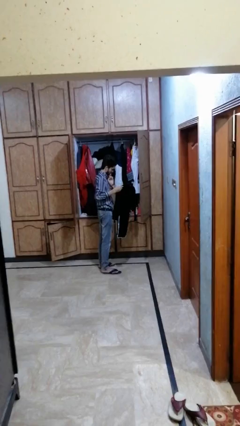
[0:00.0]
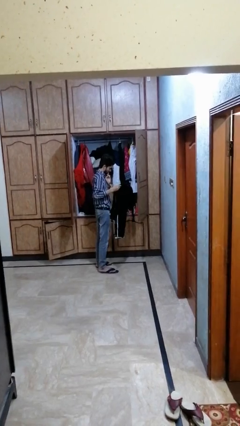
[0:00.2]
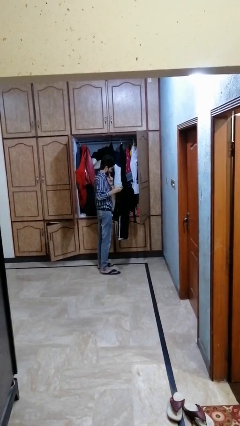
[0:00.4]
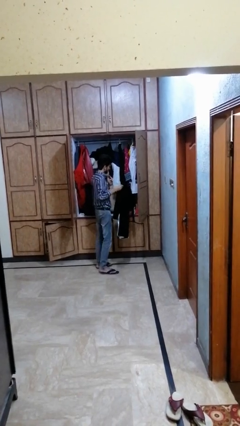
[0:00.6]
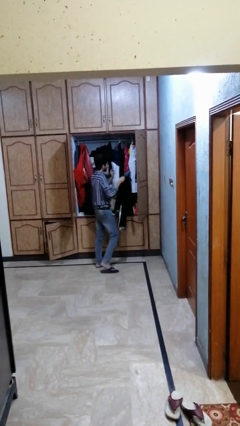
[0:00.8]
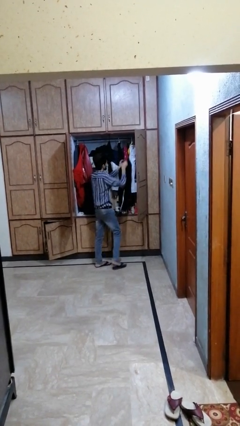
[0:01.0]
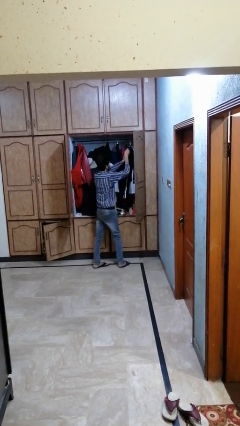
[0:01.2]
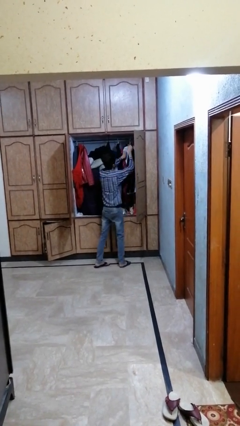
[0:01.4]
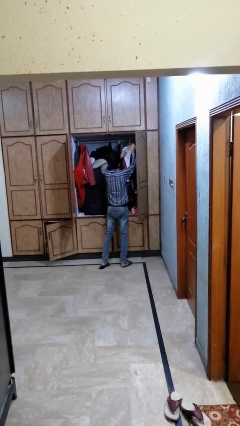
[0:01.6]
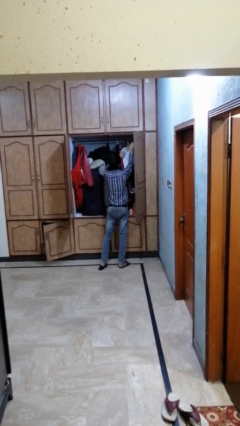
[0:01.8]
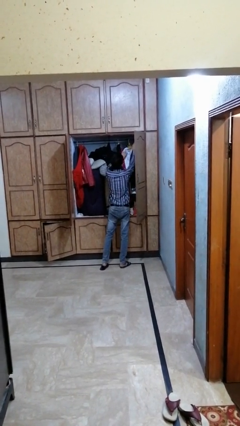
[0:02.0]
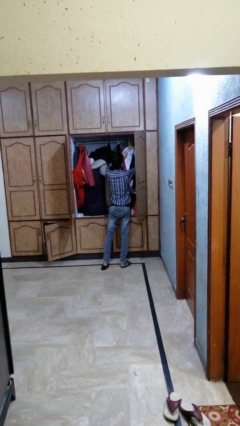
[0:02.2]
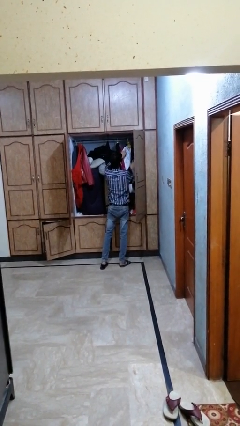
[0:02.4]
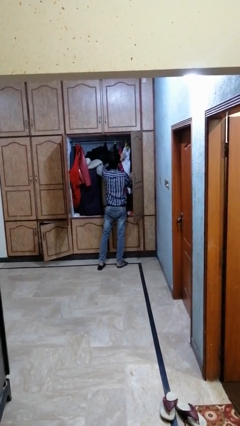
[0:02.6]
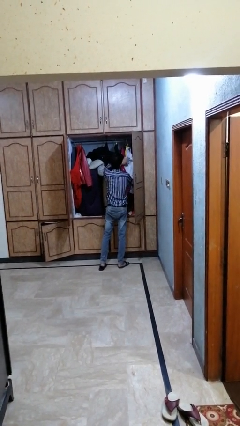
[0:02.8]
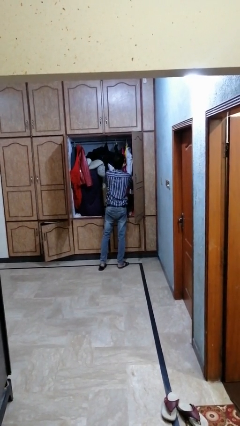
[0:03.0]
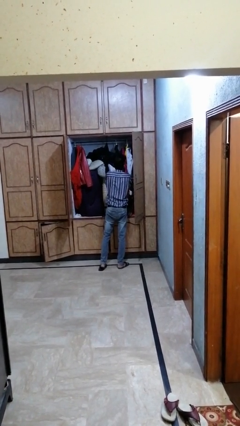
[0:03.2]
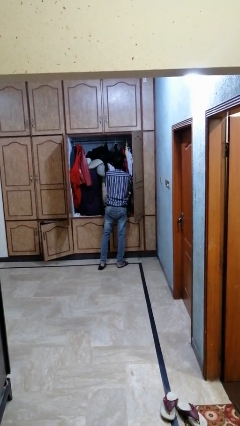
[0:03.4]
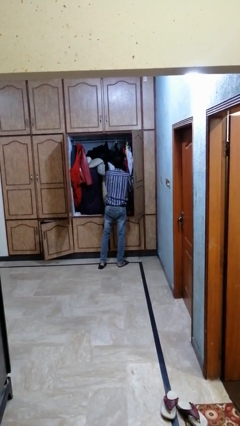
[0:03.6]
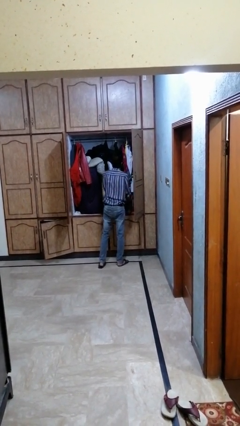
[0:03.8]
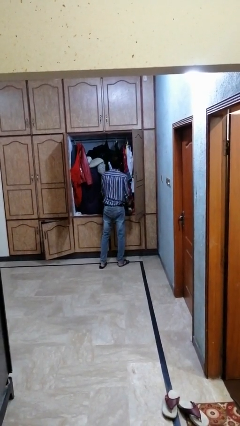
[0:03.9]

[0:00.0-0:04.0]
person puts clothes into dresser

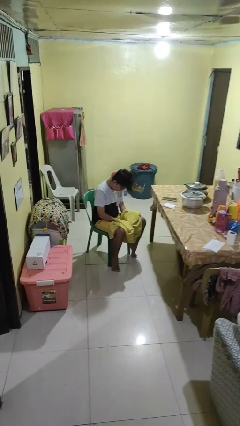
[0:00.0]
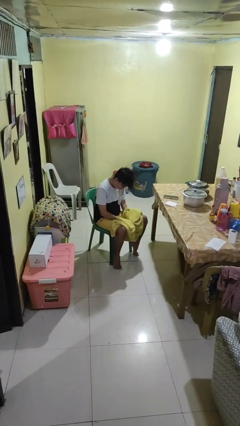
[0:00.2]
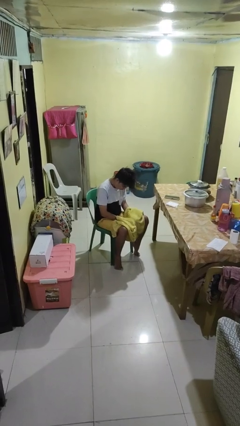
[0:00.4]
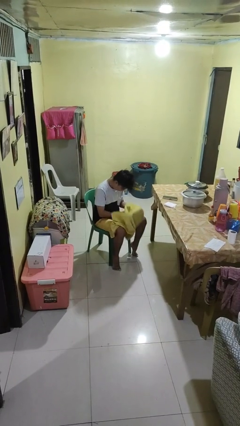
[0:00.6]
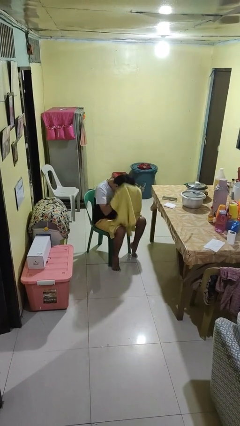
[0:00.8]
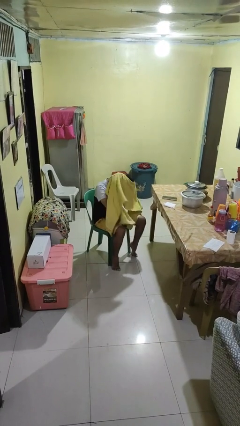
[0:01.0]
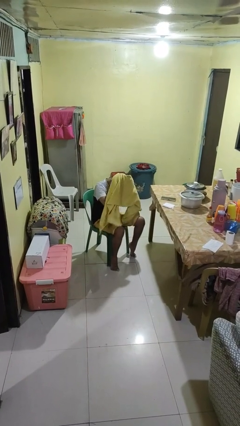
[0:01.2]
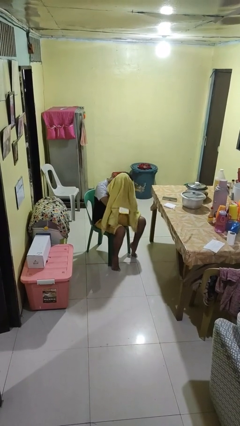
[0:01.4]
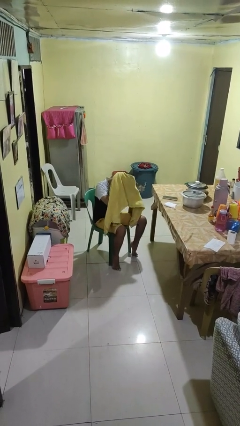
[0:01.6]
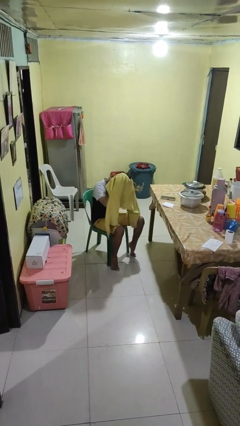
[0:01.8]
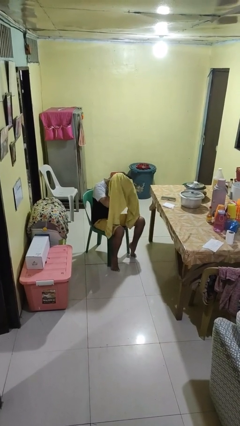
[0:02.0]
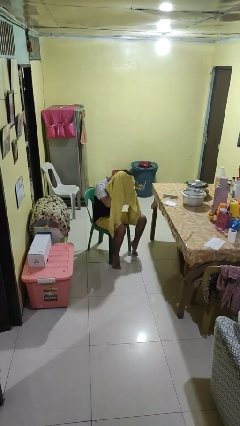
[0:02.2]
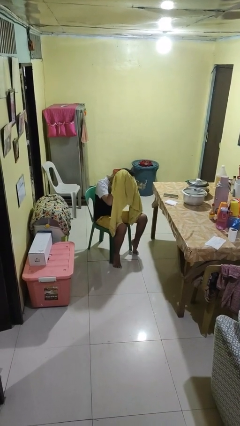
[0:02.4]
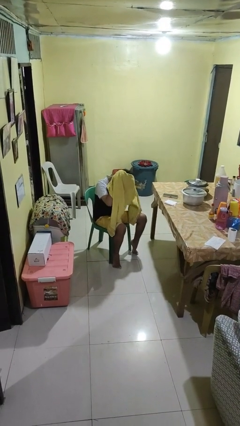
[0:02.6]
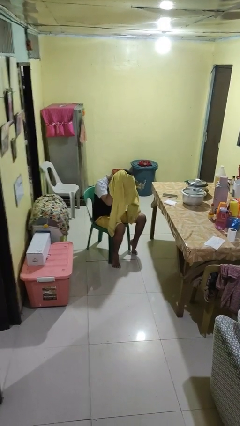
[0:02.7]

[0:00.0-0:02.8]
person dries hair with towel

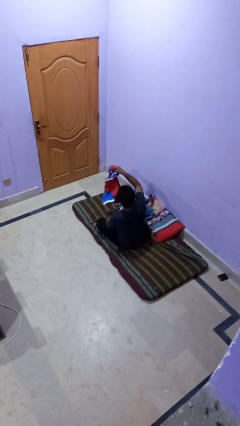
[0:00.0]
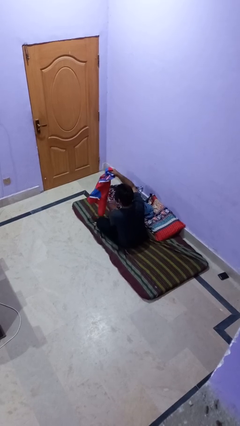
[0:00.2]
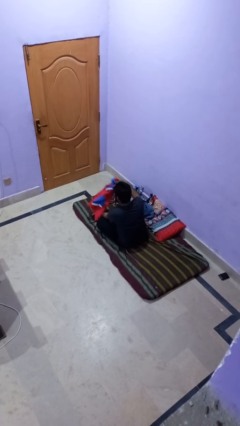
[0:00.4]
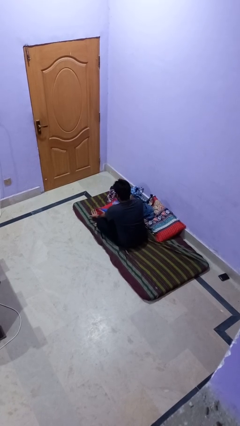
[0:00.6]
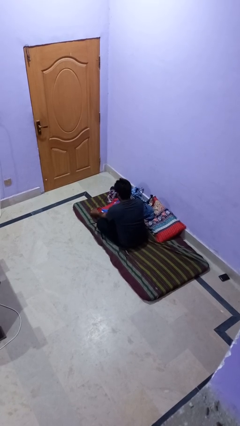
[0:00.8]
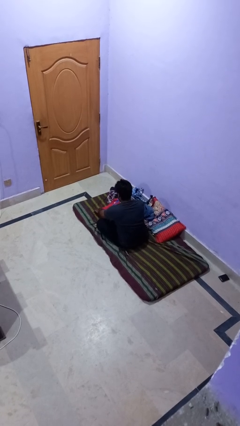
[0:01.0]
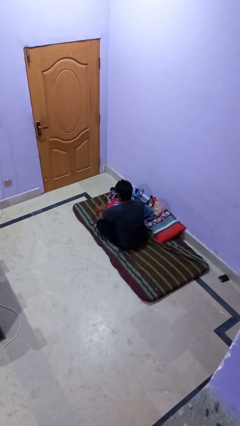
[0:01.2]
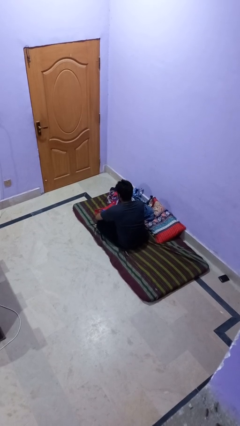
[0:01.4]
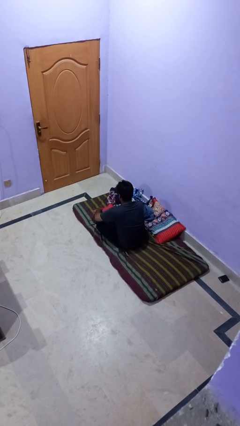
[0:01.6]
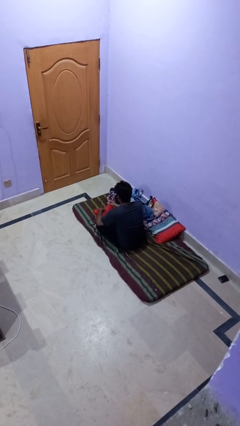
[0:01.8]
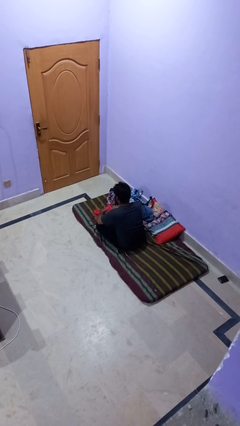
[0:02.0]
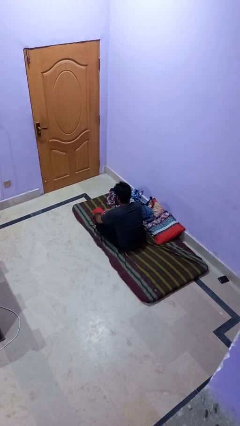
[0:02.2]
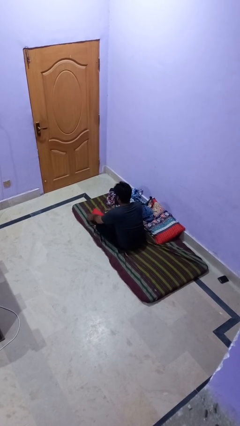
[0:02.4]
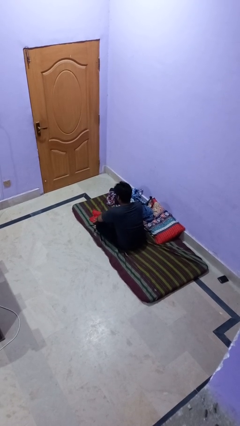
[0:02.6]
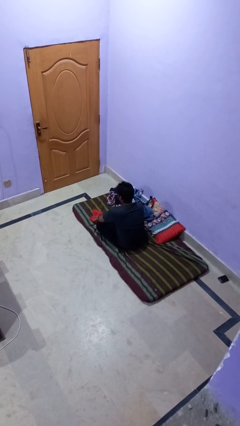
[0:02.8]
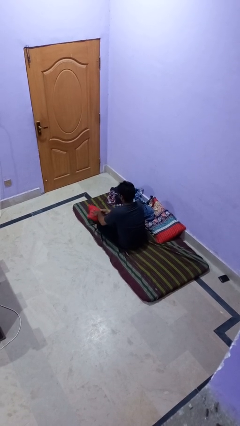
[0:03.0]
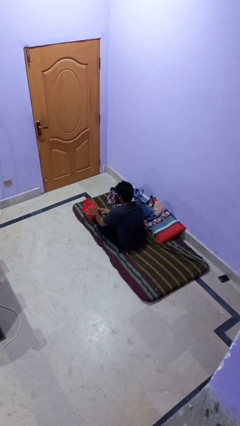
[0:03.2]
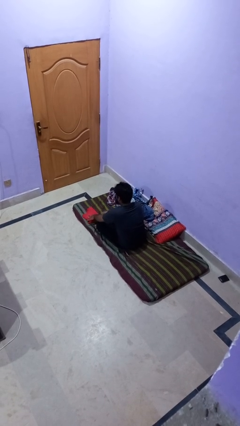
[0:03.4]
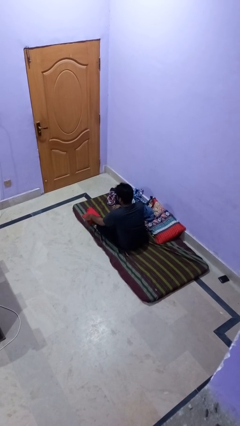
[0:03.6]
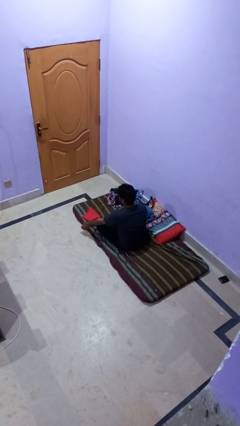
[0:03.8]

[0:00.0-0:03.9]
person folds shirt

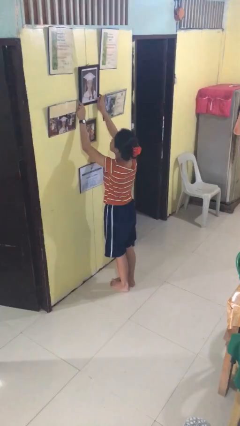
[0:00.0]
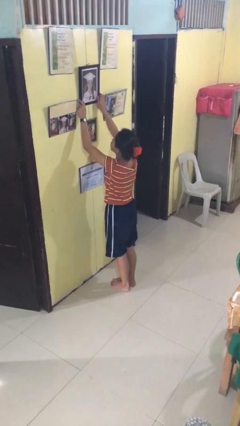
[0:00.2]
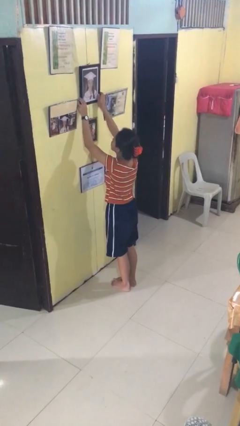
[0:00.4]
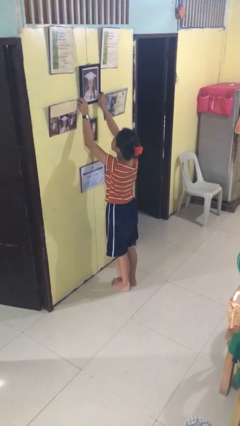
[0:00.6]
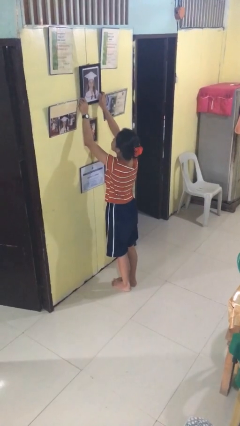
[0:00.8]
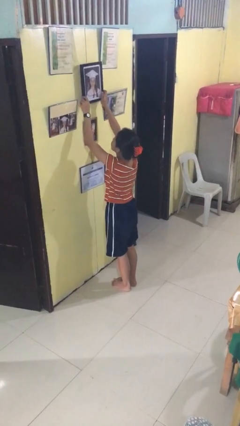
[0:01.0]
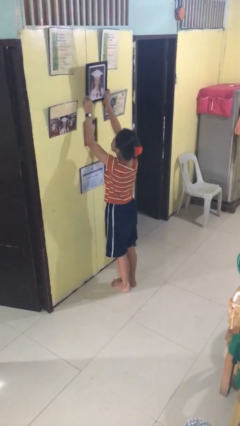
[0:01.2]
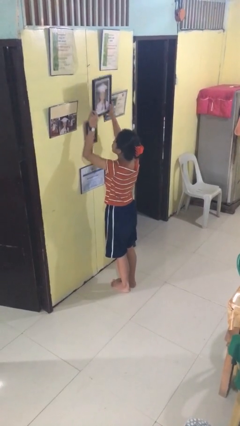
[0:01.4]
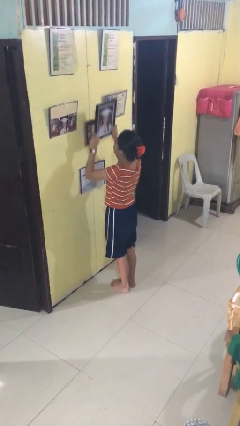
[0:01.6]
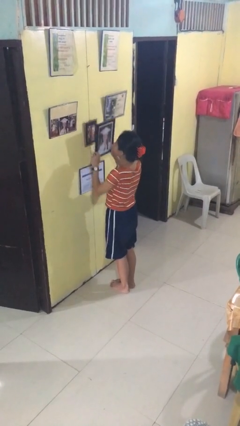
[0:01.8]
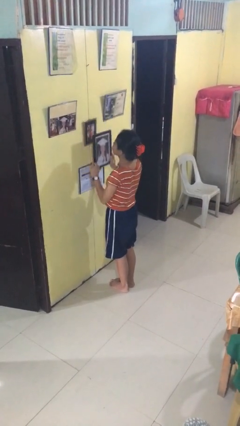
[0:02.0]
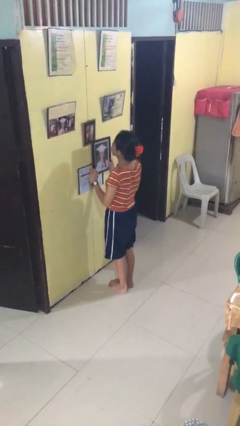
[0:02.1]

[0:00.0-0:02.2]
person takes down picture frame

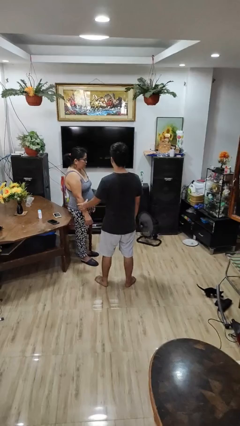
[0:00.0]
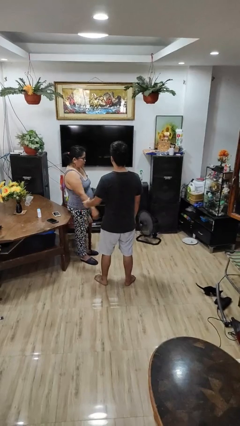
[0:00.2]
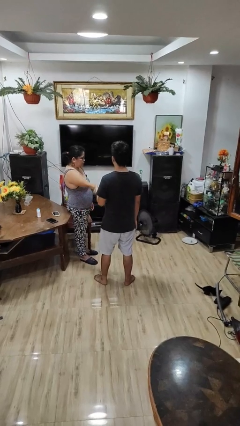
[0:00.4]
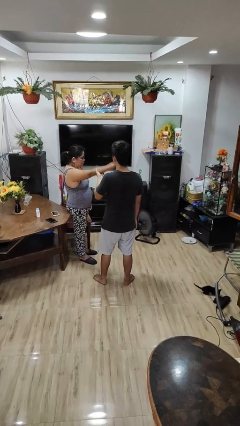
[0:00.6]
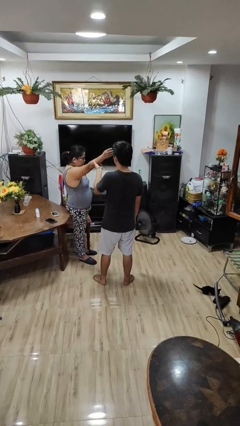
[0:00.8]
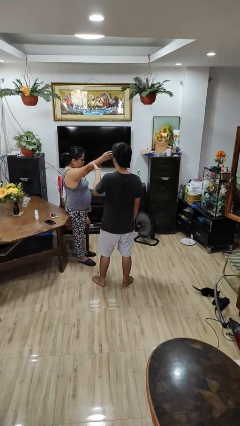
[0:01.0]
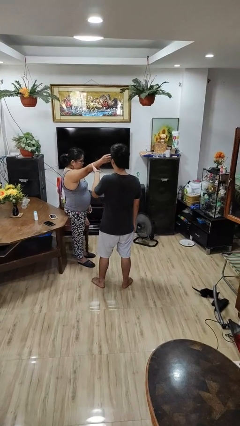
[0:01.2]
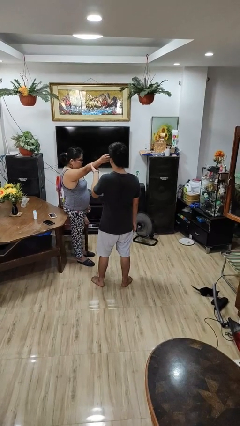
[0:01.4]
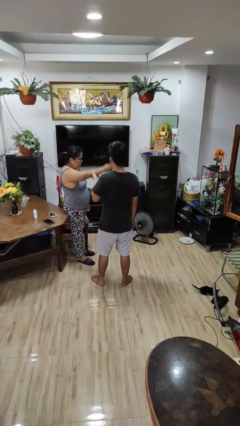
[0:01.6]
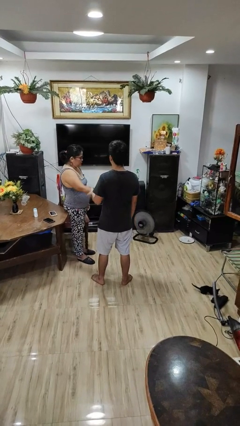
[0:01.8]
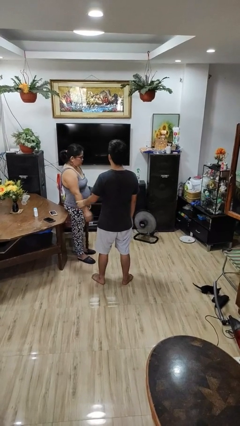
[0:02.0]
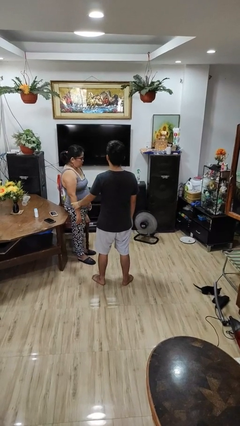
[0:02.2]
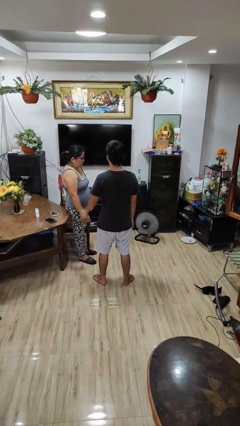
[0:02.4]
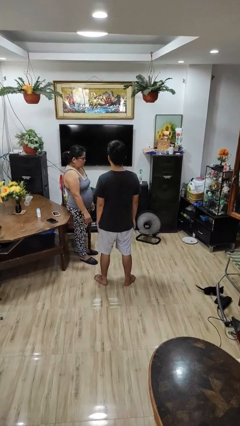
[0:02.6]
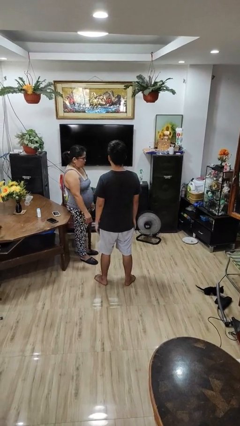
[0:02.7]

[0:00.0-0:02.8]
person grabs person by forearm

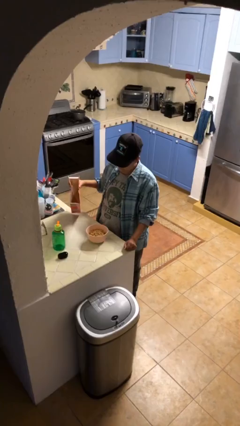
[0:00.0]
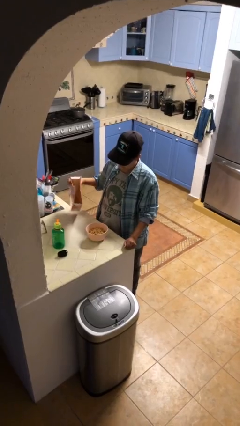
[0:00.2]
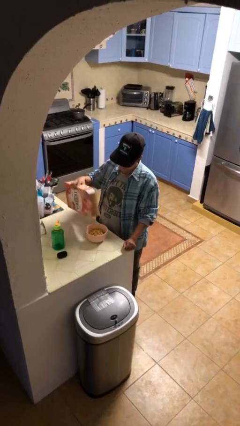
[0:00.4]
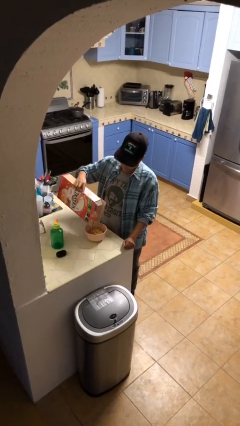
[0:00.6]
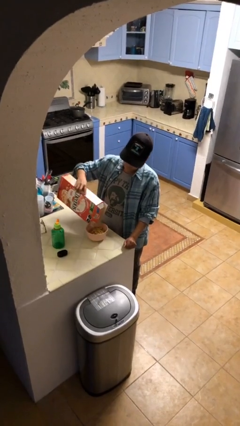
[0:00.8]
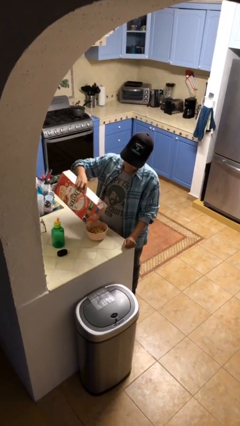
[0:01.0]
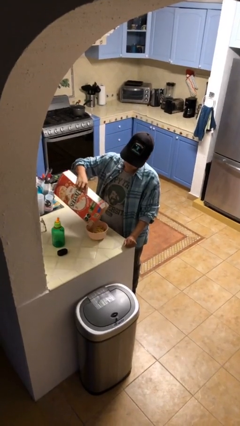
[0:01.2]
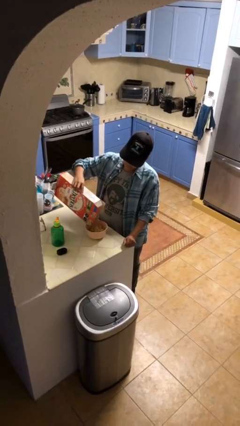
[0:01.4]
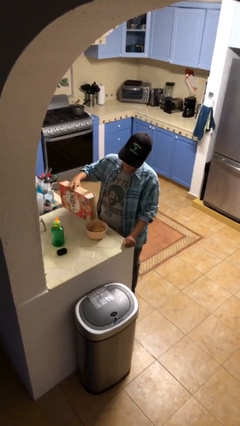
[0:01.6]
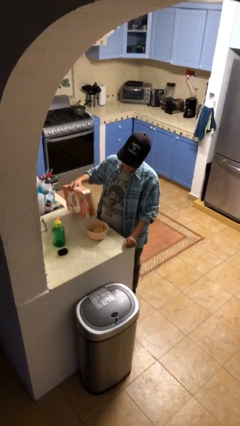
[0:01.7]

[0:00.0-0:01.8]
person pours into bowl

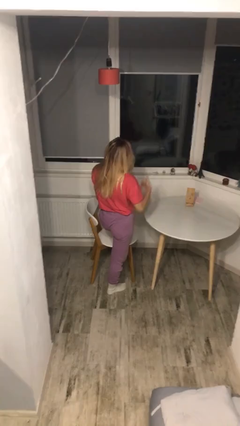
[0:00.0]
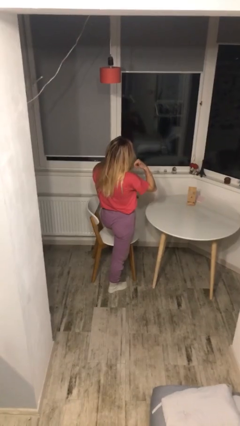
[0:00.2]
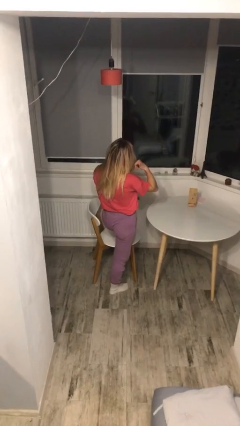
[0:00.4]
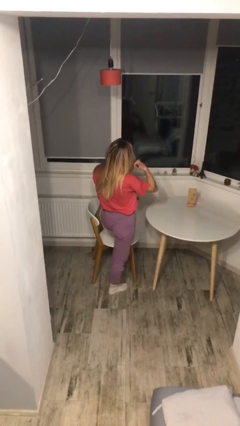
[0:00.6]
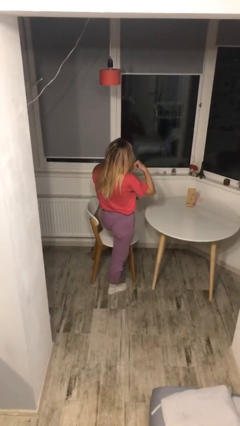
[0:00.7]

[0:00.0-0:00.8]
person gestures number five
